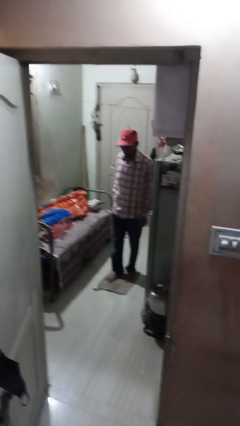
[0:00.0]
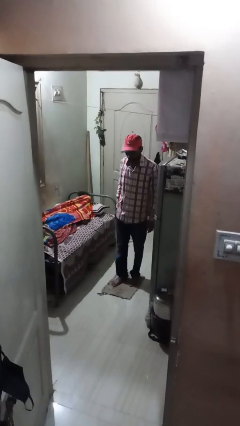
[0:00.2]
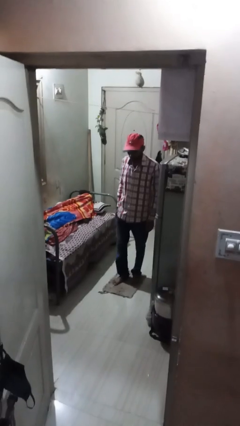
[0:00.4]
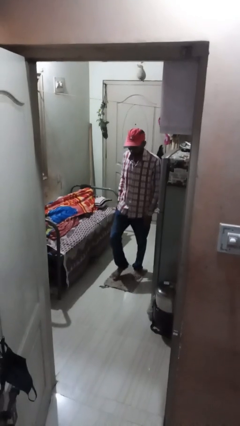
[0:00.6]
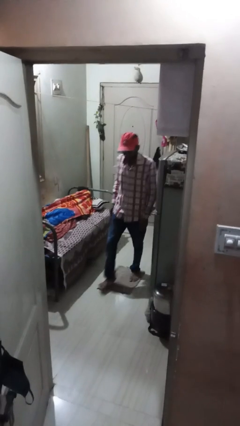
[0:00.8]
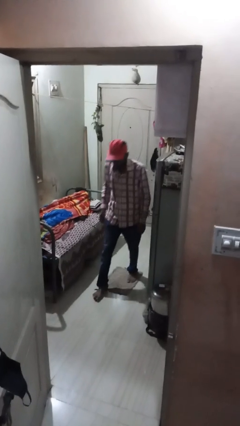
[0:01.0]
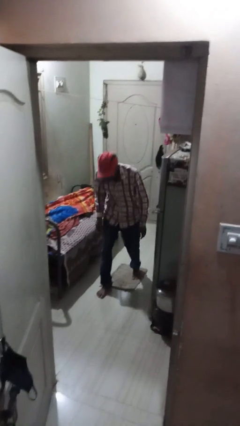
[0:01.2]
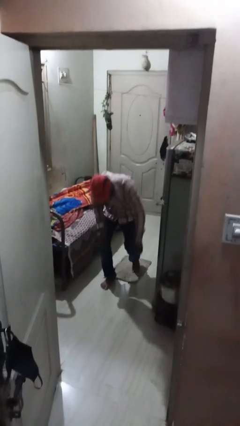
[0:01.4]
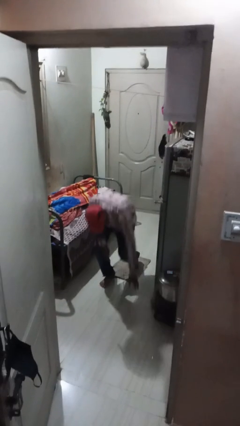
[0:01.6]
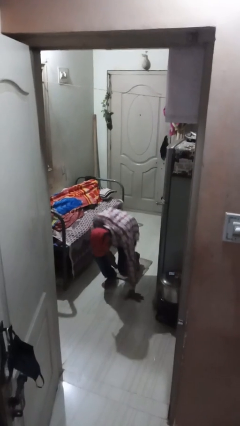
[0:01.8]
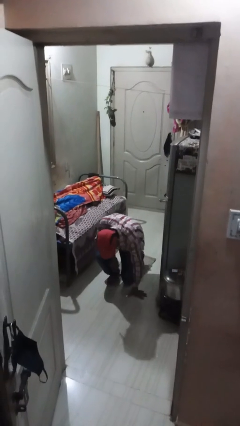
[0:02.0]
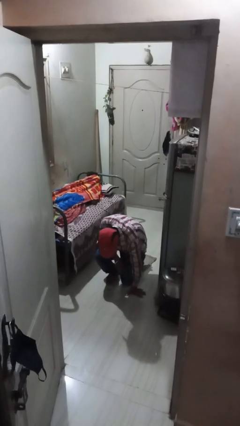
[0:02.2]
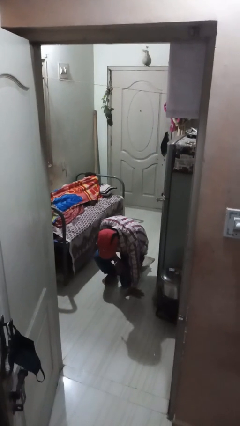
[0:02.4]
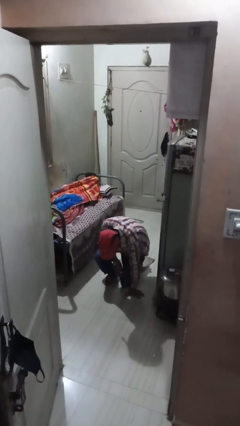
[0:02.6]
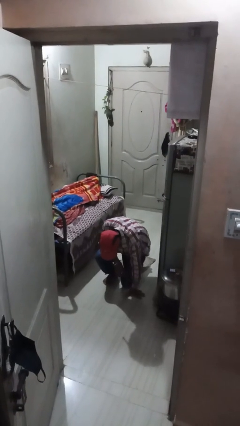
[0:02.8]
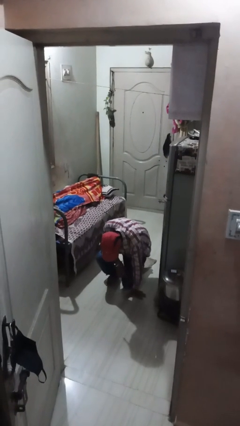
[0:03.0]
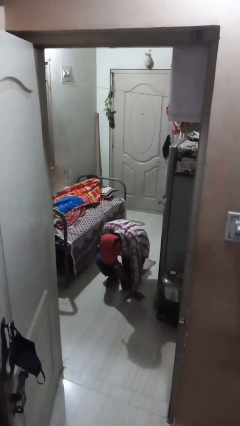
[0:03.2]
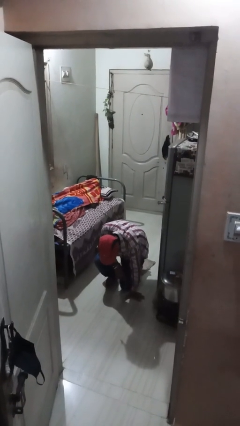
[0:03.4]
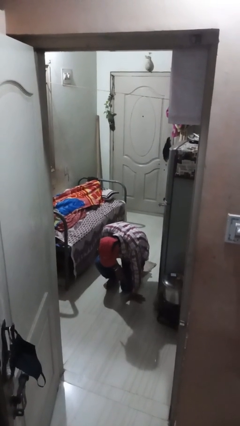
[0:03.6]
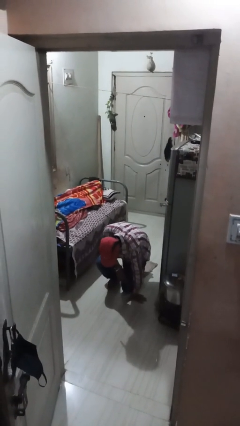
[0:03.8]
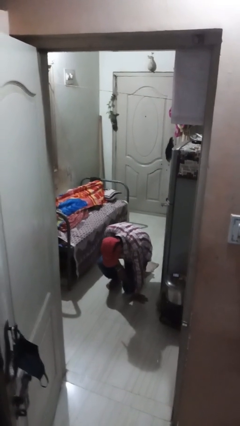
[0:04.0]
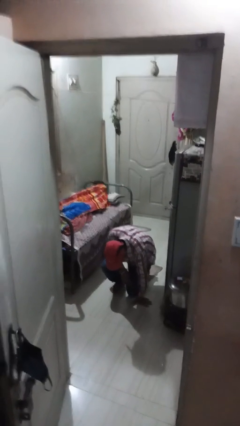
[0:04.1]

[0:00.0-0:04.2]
person kneels

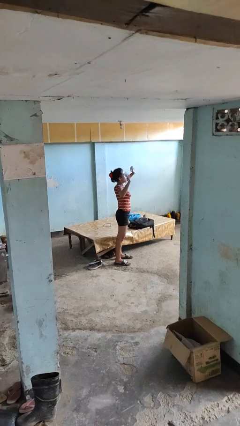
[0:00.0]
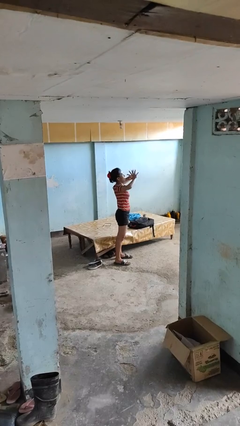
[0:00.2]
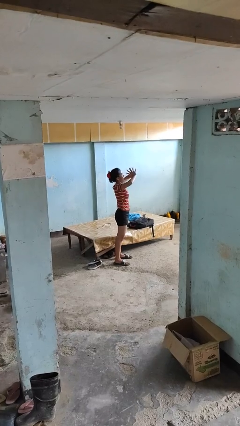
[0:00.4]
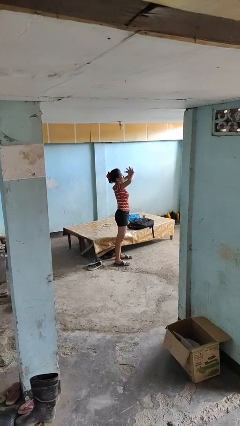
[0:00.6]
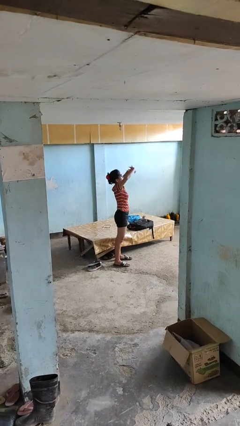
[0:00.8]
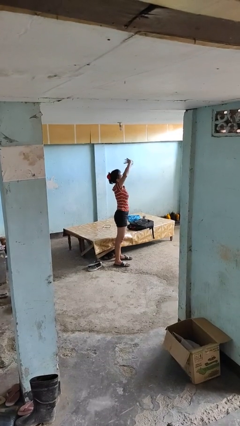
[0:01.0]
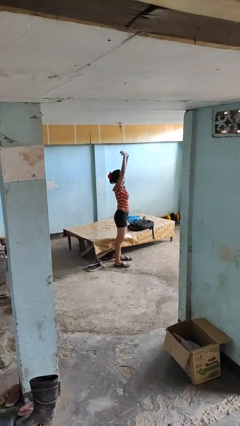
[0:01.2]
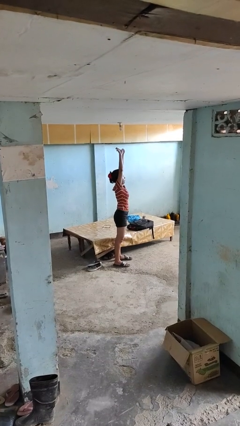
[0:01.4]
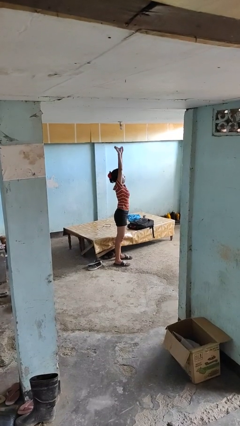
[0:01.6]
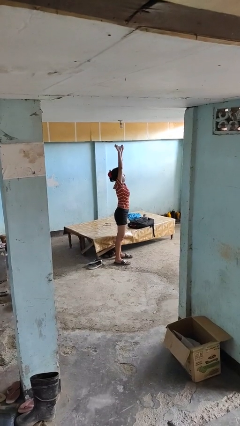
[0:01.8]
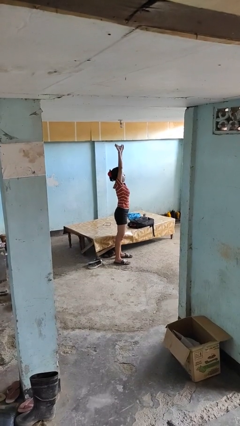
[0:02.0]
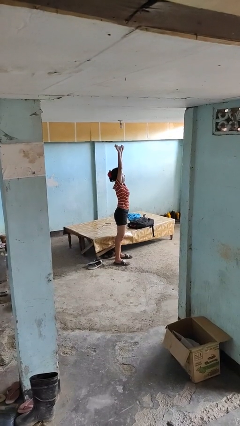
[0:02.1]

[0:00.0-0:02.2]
person stretches arms over head

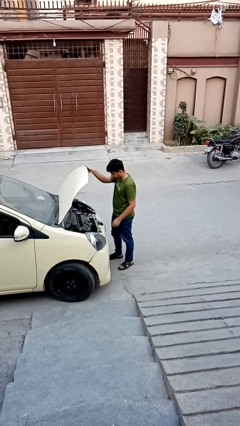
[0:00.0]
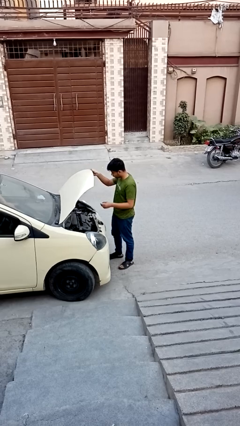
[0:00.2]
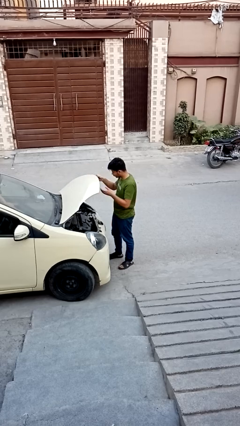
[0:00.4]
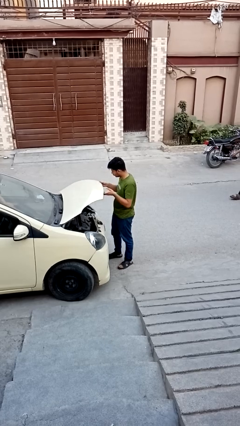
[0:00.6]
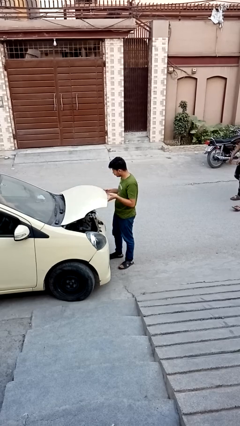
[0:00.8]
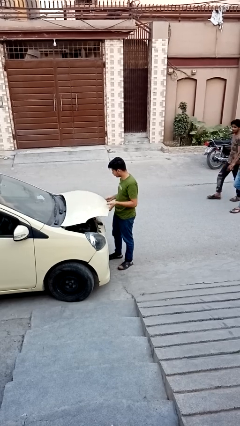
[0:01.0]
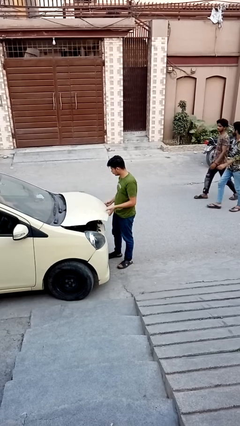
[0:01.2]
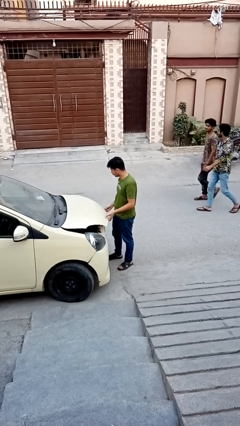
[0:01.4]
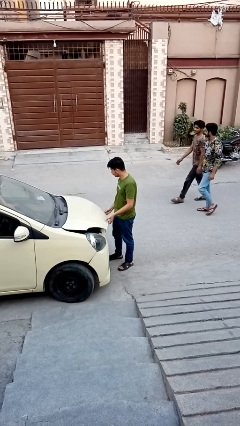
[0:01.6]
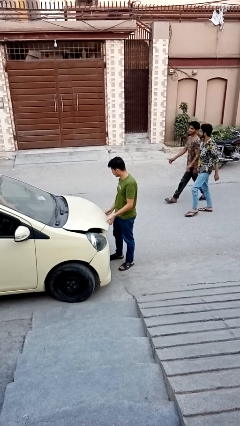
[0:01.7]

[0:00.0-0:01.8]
person closes car hood

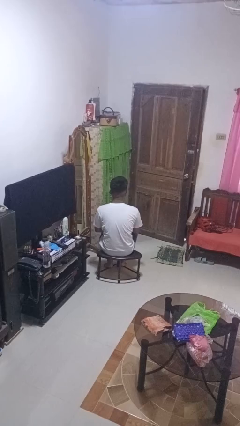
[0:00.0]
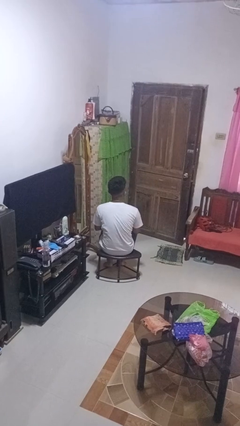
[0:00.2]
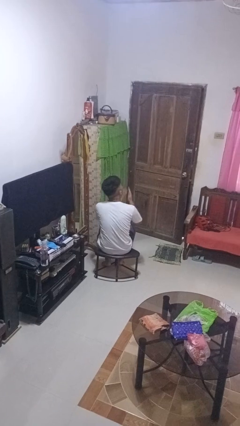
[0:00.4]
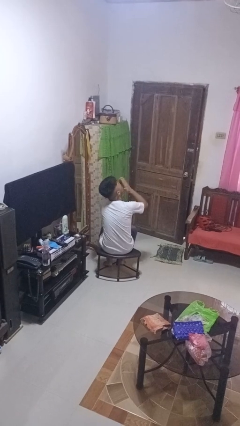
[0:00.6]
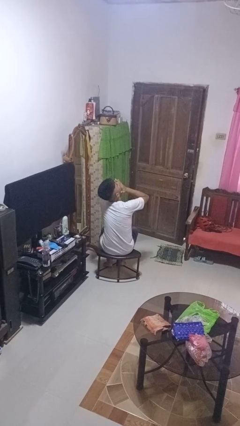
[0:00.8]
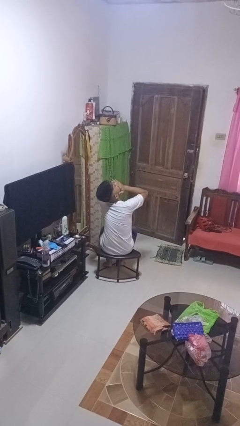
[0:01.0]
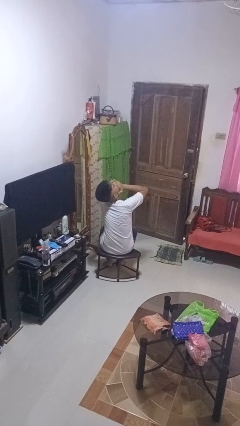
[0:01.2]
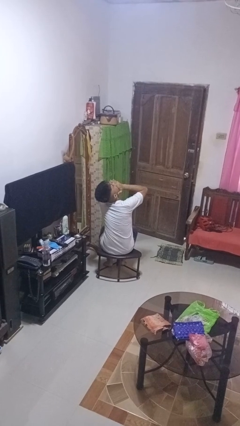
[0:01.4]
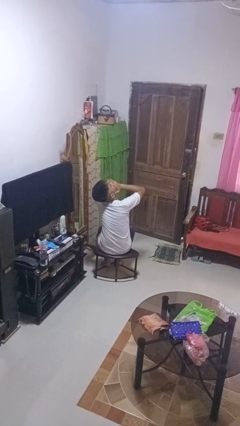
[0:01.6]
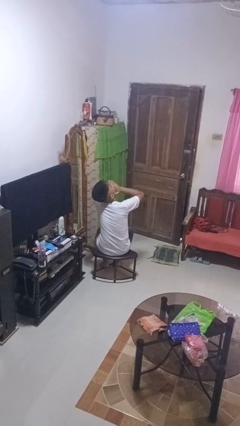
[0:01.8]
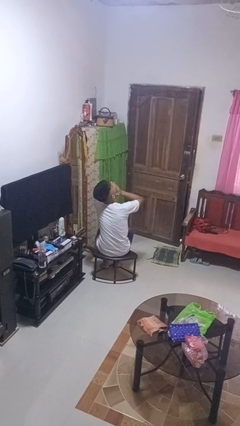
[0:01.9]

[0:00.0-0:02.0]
person yawns

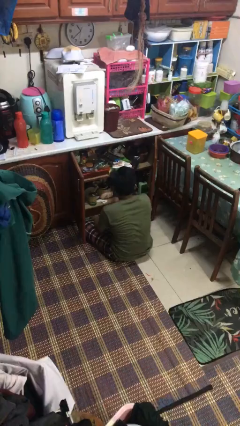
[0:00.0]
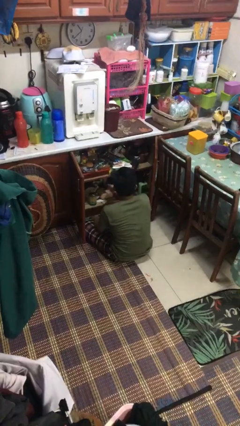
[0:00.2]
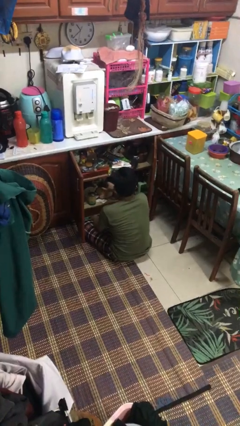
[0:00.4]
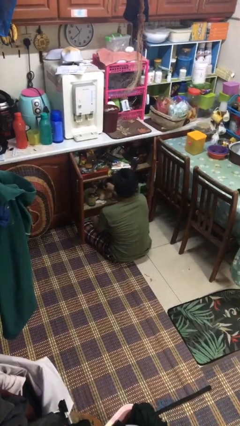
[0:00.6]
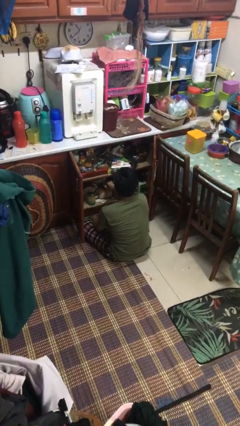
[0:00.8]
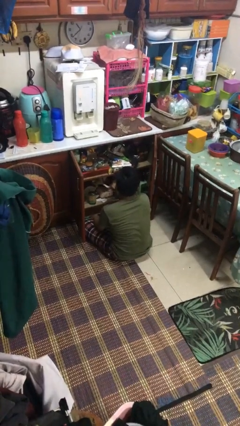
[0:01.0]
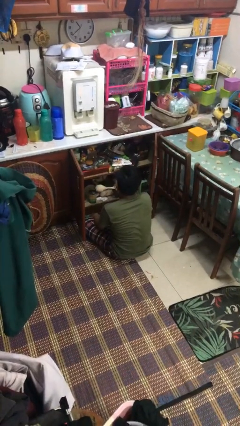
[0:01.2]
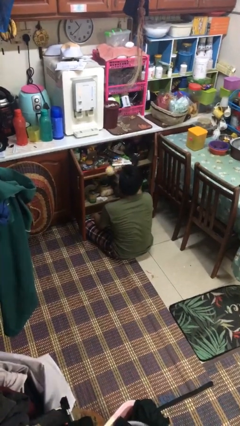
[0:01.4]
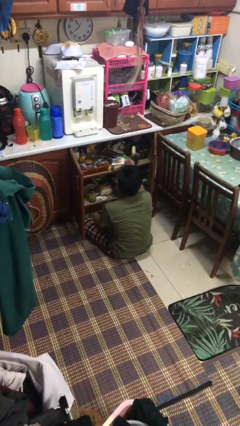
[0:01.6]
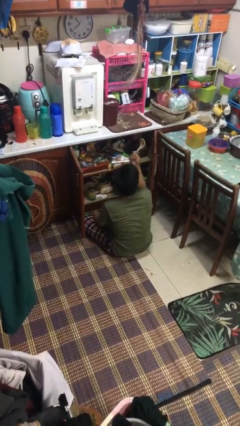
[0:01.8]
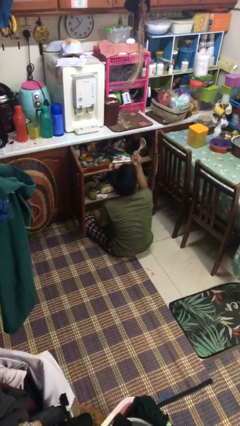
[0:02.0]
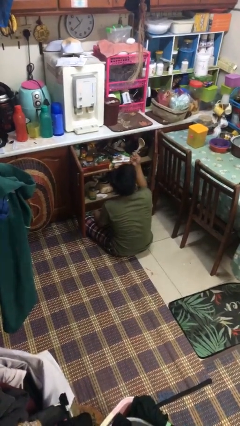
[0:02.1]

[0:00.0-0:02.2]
person takes object from kitchen drawer

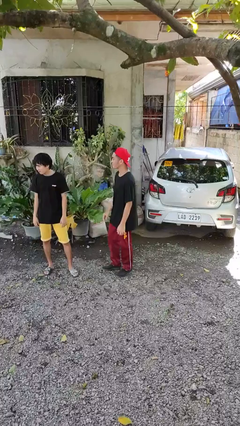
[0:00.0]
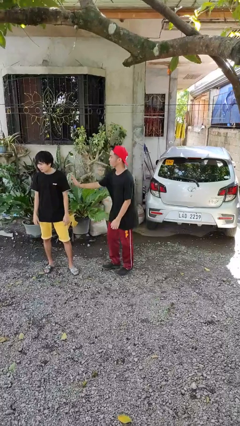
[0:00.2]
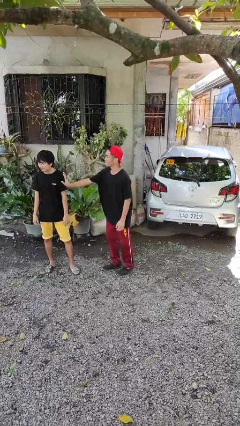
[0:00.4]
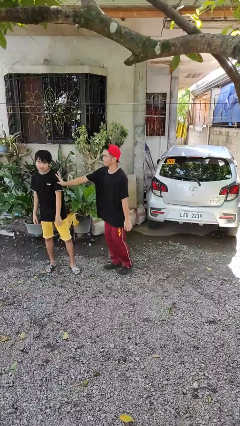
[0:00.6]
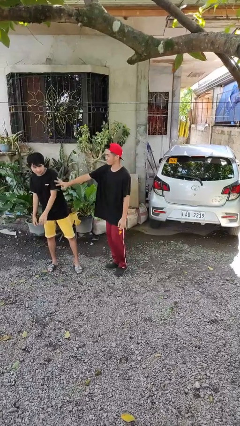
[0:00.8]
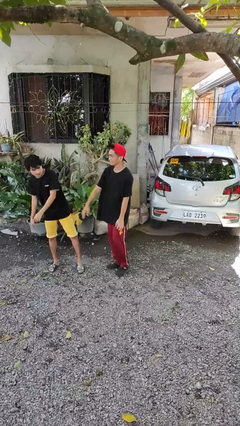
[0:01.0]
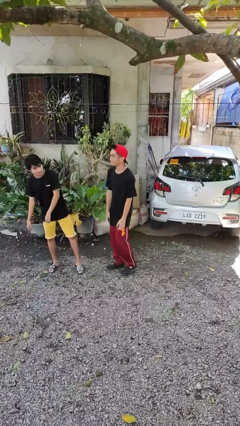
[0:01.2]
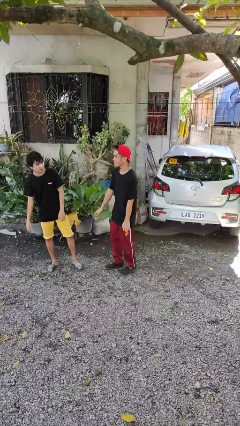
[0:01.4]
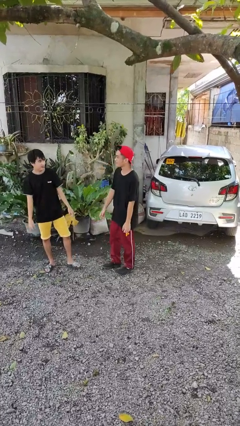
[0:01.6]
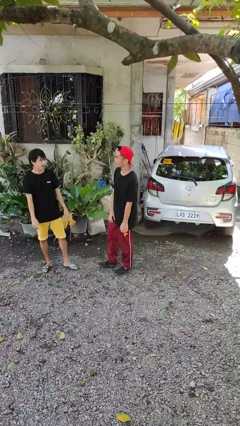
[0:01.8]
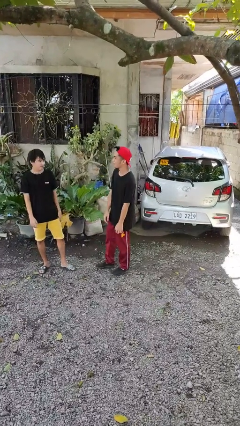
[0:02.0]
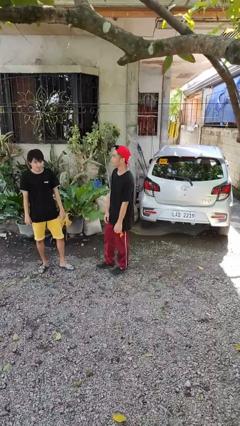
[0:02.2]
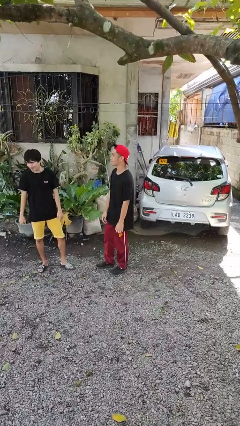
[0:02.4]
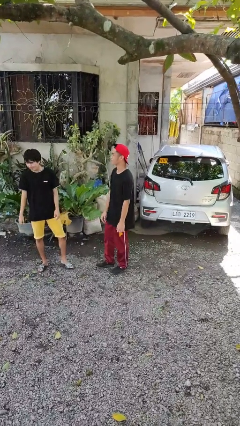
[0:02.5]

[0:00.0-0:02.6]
person shoves person

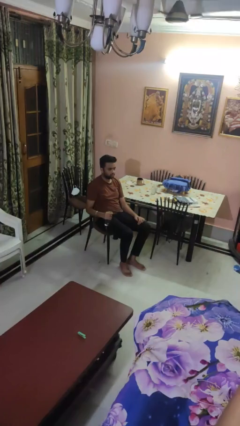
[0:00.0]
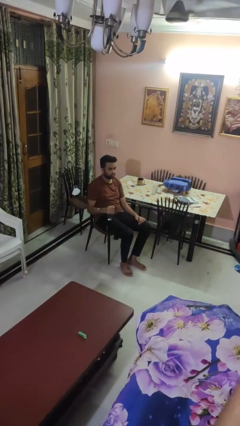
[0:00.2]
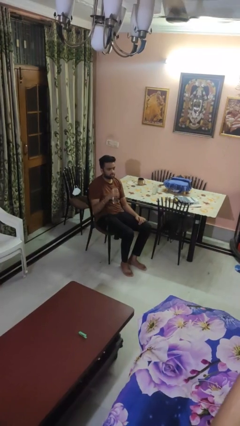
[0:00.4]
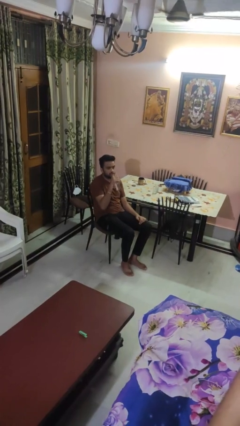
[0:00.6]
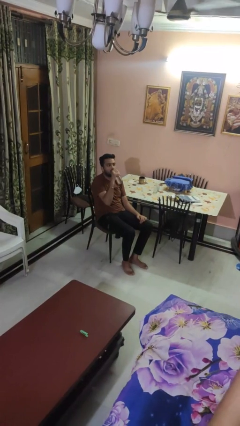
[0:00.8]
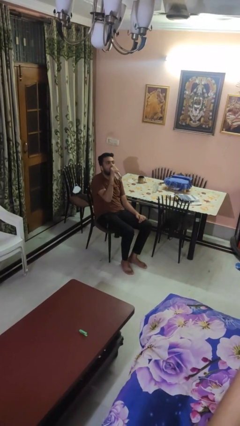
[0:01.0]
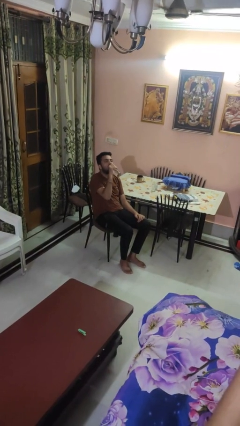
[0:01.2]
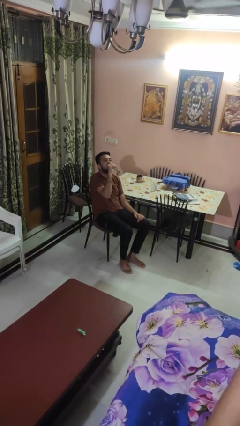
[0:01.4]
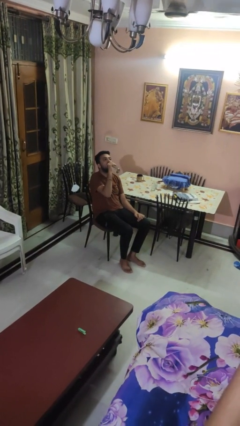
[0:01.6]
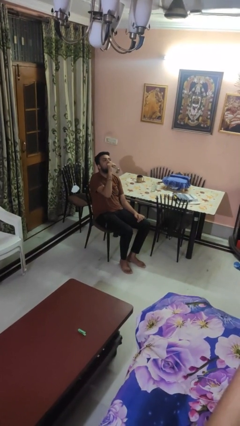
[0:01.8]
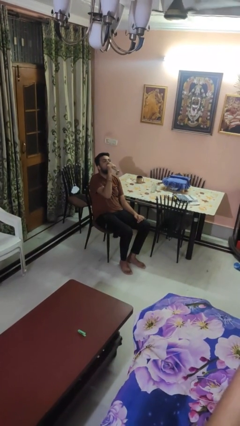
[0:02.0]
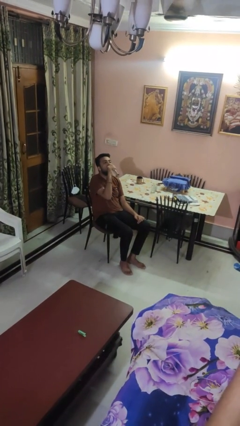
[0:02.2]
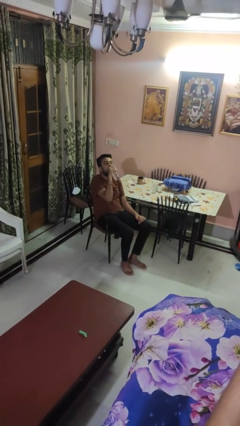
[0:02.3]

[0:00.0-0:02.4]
person drinks from bottle
